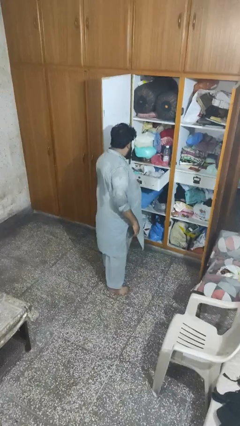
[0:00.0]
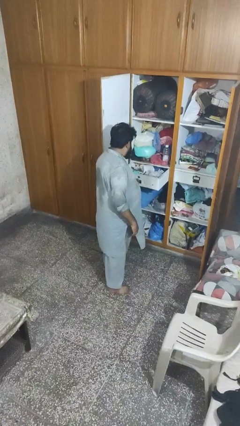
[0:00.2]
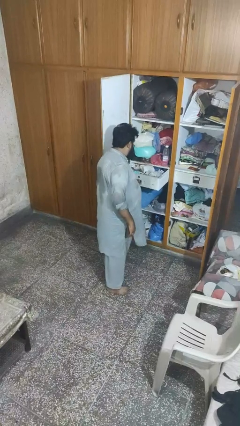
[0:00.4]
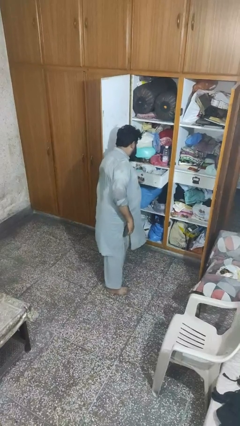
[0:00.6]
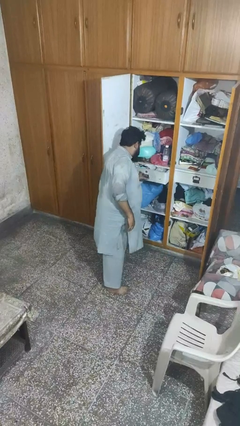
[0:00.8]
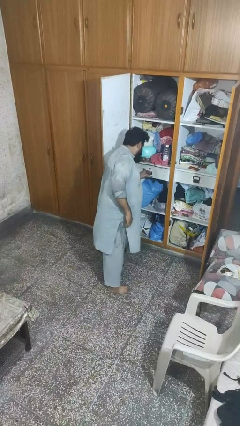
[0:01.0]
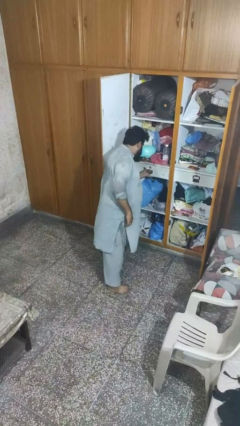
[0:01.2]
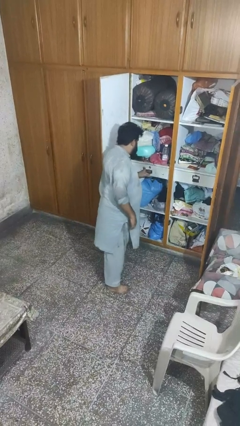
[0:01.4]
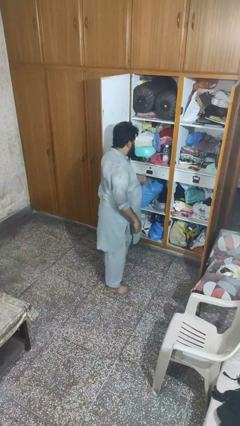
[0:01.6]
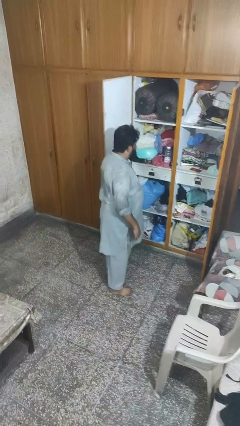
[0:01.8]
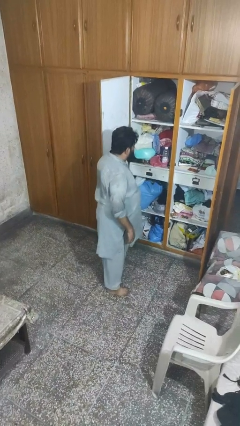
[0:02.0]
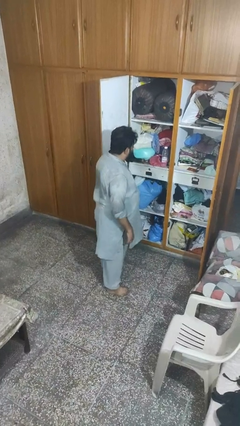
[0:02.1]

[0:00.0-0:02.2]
person closes dresser drawer

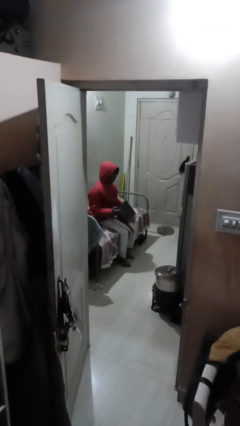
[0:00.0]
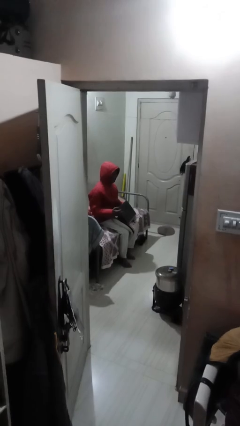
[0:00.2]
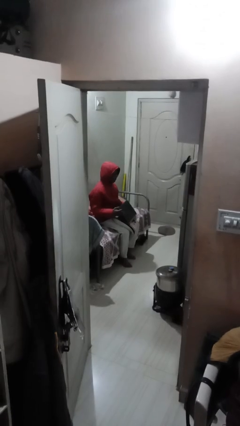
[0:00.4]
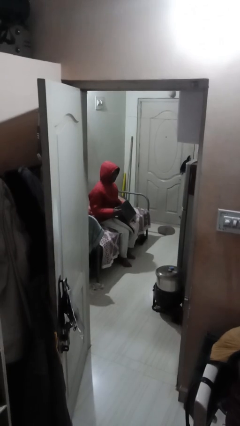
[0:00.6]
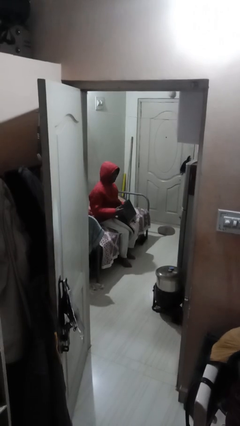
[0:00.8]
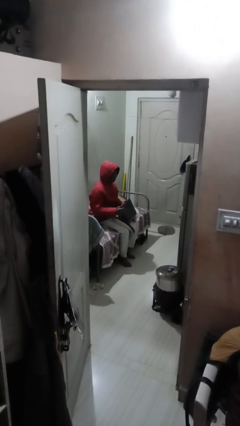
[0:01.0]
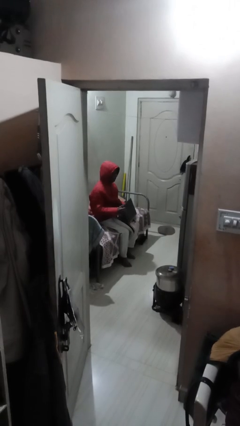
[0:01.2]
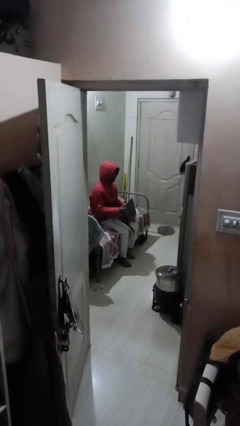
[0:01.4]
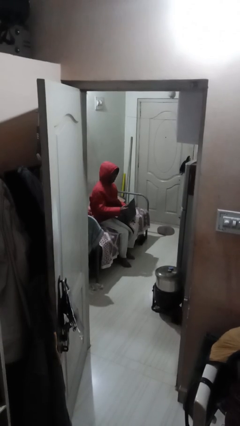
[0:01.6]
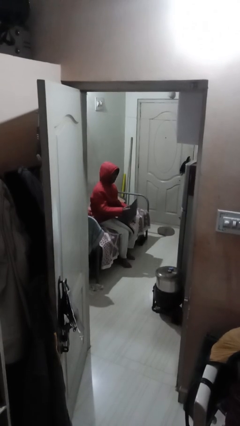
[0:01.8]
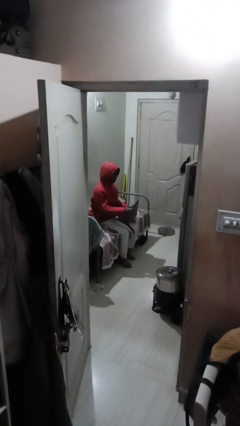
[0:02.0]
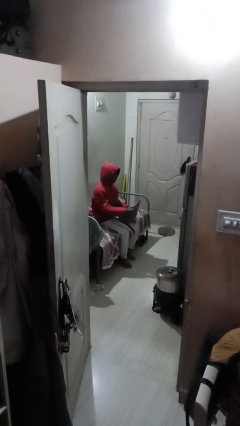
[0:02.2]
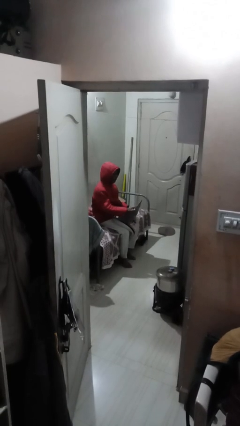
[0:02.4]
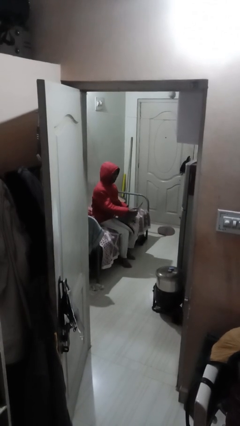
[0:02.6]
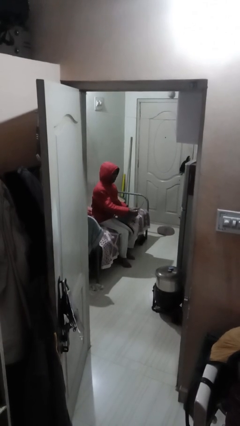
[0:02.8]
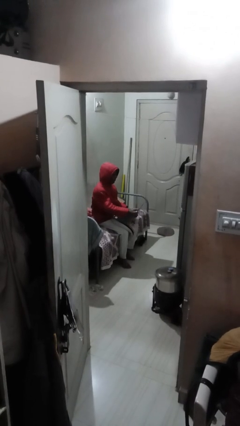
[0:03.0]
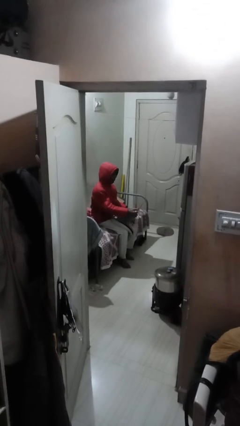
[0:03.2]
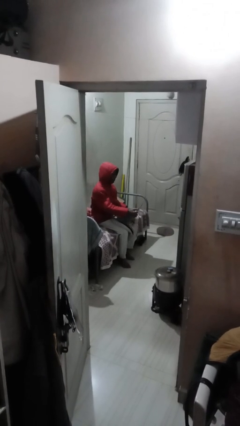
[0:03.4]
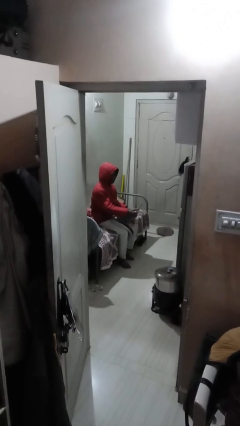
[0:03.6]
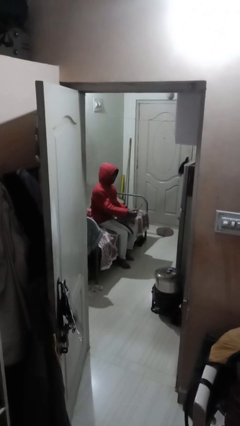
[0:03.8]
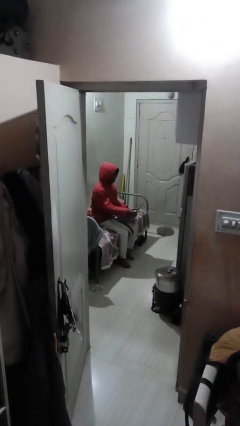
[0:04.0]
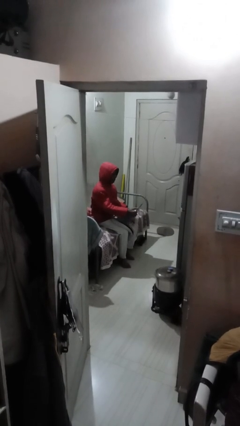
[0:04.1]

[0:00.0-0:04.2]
person interacts with laptop

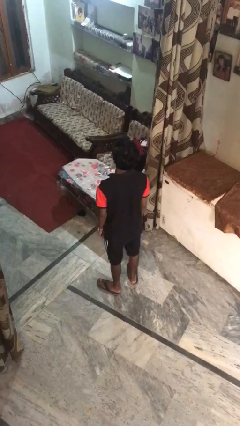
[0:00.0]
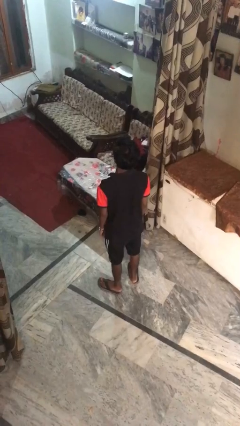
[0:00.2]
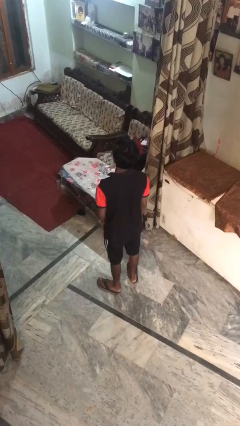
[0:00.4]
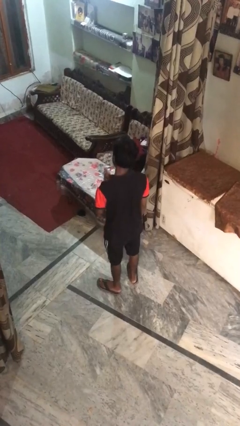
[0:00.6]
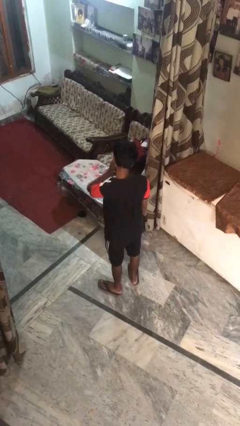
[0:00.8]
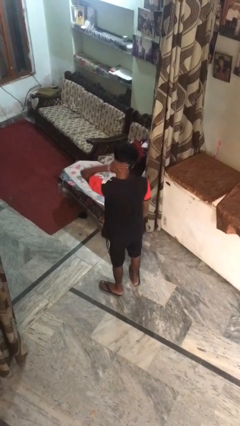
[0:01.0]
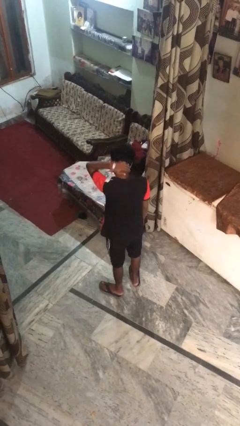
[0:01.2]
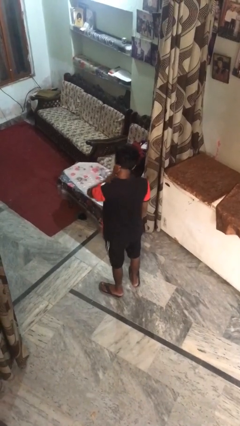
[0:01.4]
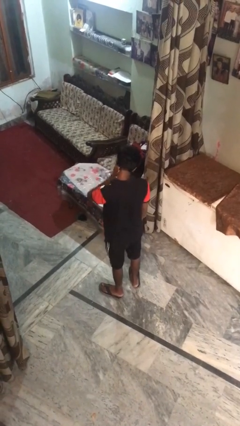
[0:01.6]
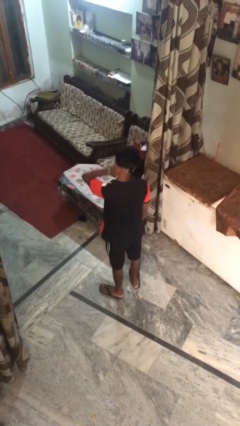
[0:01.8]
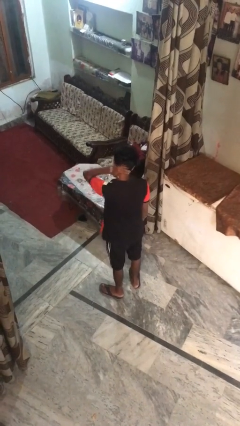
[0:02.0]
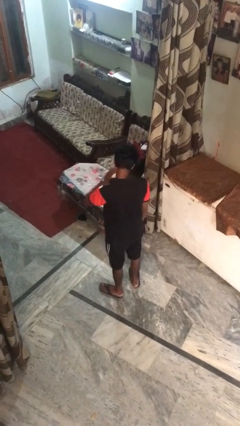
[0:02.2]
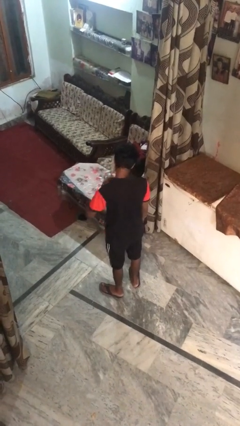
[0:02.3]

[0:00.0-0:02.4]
person rubs neck

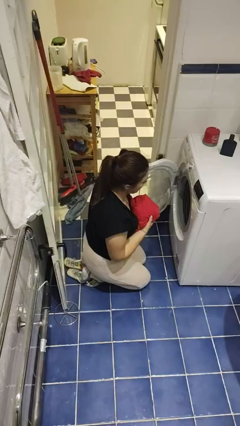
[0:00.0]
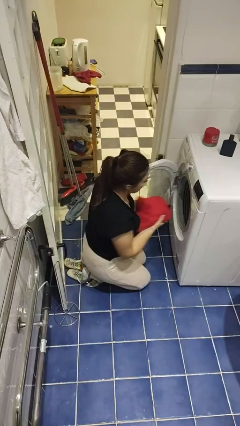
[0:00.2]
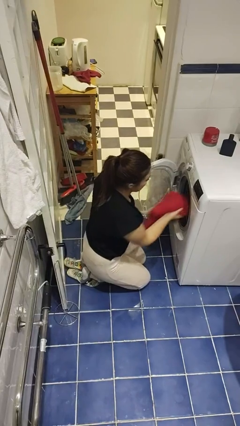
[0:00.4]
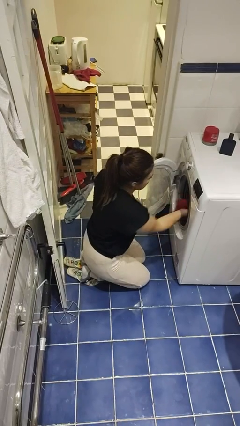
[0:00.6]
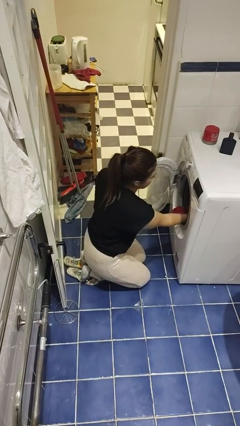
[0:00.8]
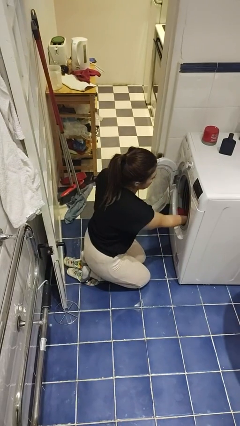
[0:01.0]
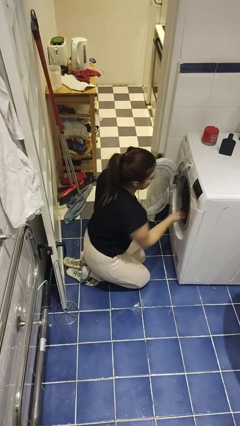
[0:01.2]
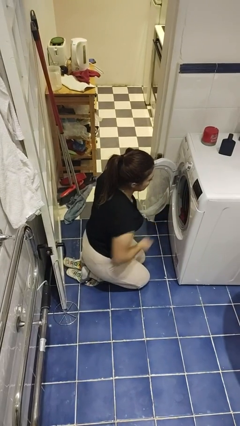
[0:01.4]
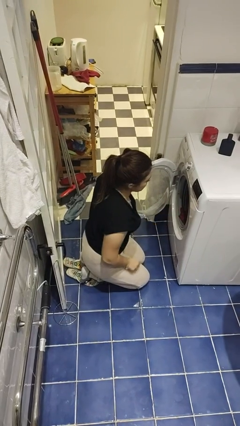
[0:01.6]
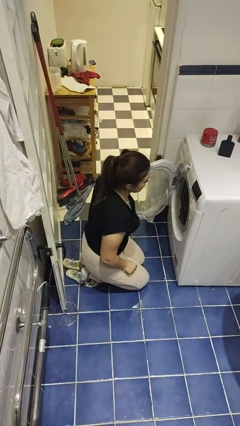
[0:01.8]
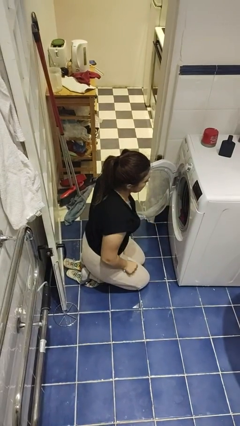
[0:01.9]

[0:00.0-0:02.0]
person loads dryer

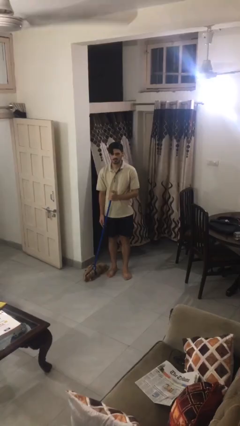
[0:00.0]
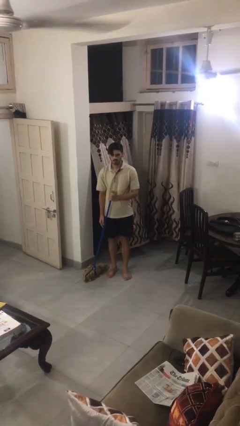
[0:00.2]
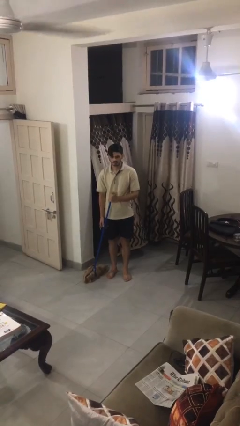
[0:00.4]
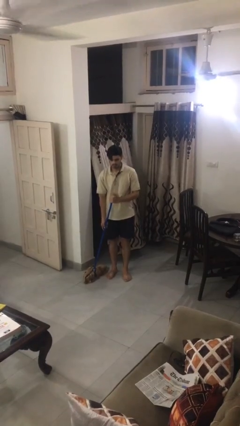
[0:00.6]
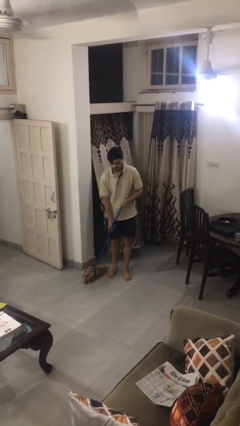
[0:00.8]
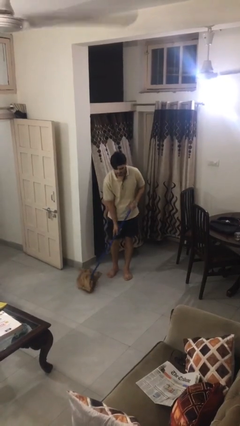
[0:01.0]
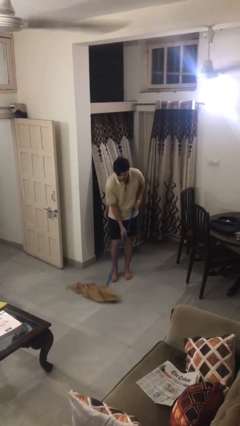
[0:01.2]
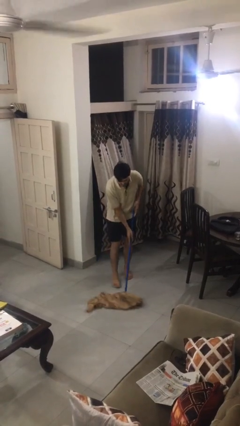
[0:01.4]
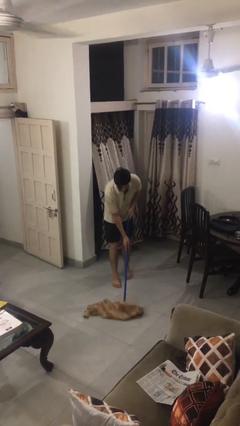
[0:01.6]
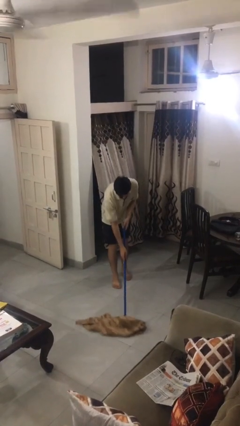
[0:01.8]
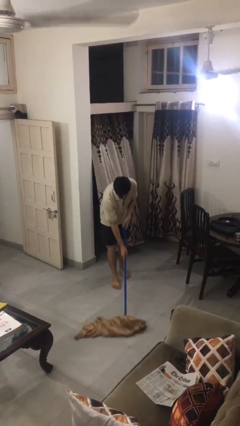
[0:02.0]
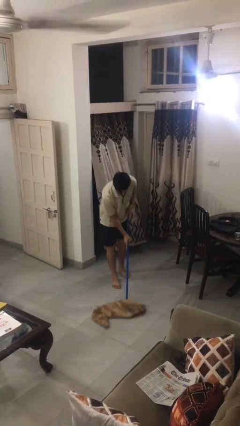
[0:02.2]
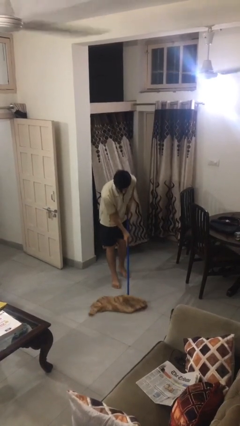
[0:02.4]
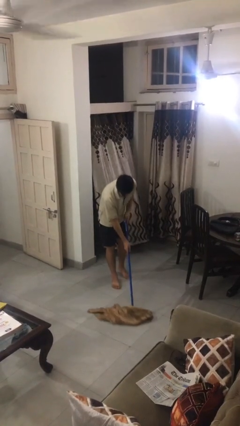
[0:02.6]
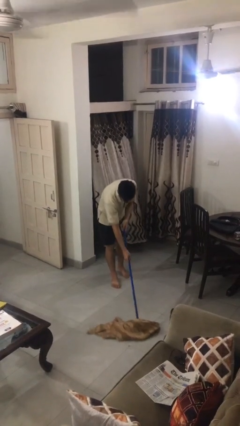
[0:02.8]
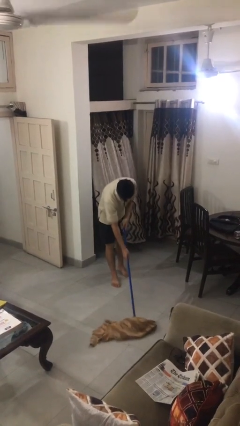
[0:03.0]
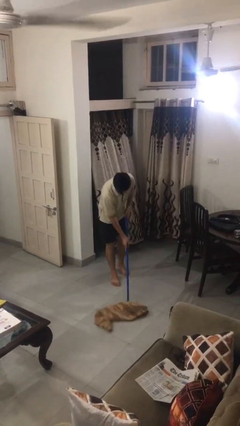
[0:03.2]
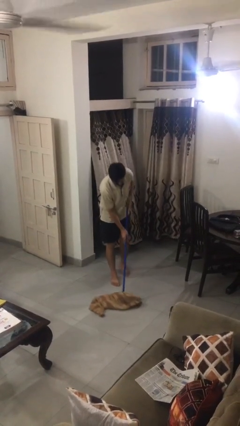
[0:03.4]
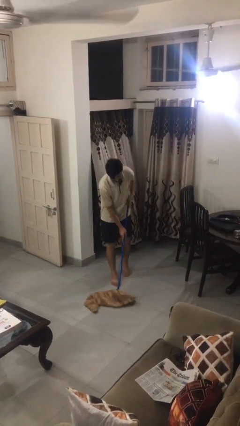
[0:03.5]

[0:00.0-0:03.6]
person mops

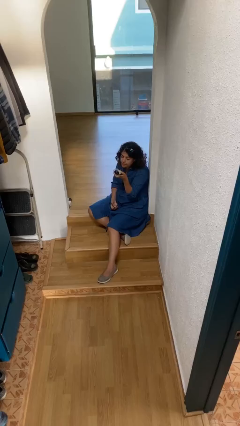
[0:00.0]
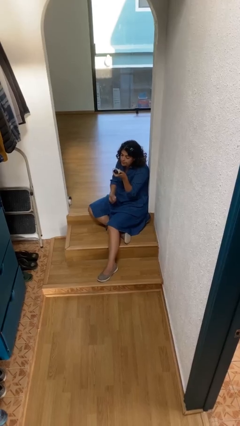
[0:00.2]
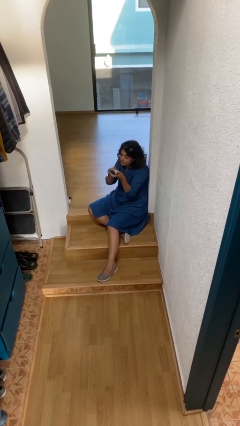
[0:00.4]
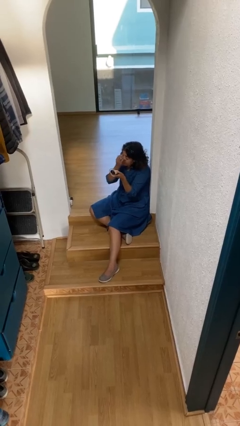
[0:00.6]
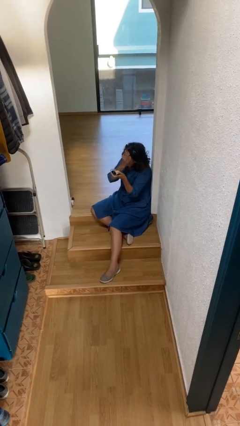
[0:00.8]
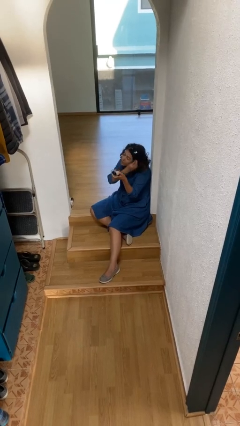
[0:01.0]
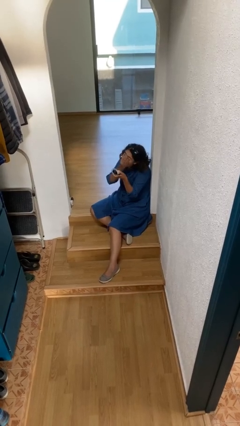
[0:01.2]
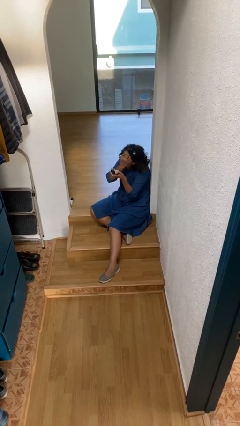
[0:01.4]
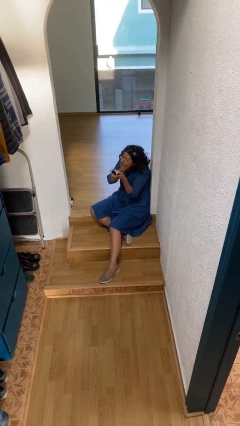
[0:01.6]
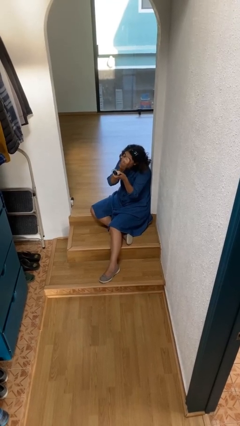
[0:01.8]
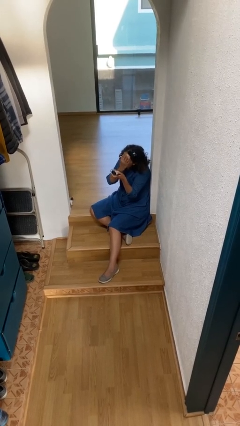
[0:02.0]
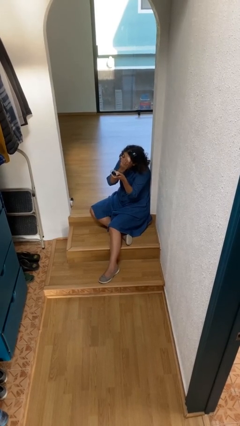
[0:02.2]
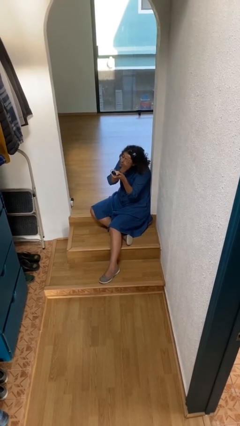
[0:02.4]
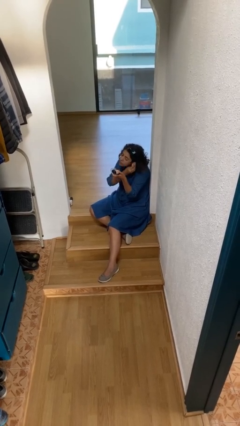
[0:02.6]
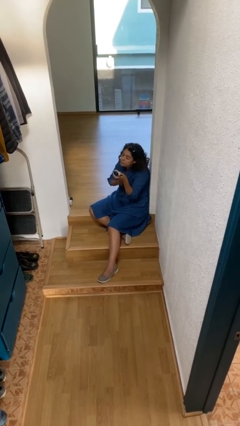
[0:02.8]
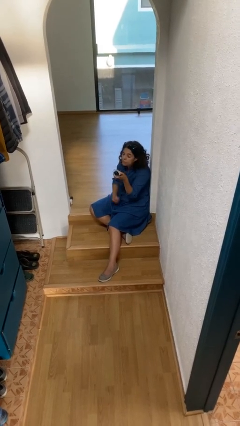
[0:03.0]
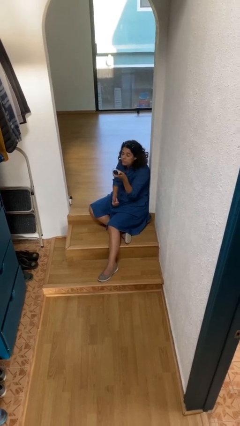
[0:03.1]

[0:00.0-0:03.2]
person applies foundation makeup
